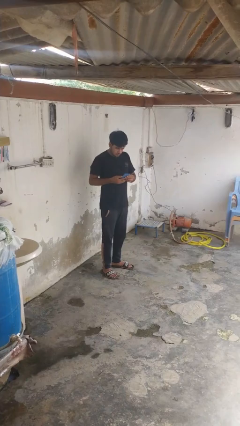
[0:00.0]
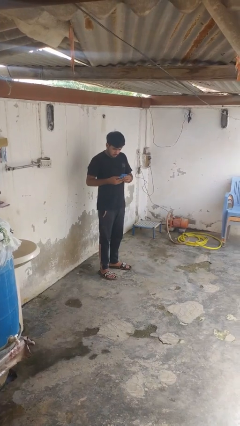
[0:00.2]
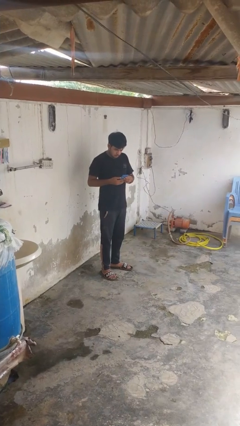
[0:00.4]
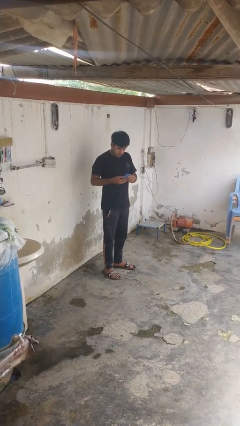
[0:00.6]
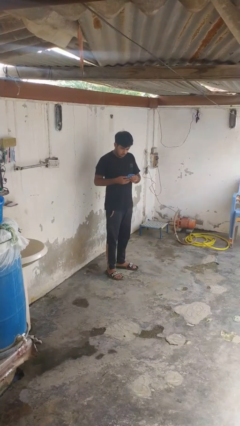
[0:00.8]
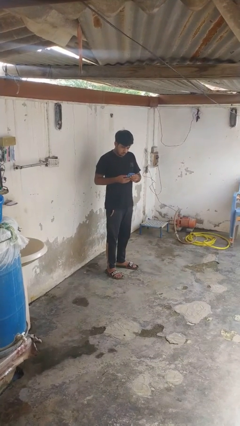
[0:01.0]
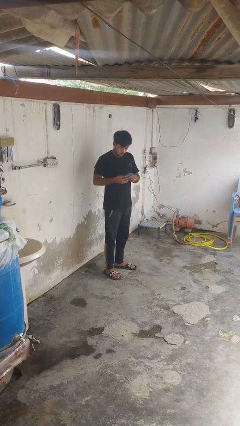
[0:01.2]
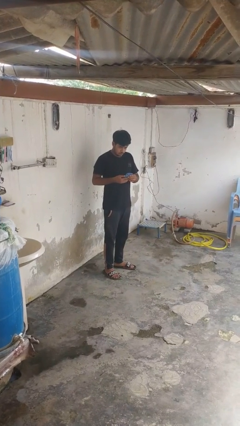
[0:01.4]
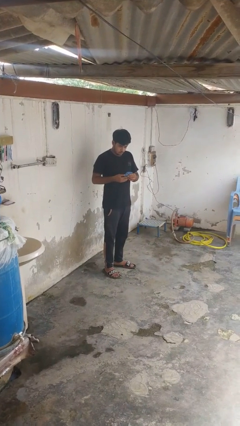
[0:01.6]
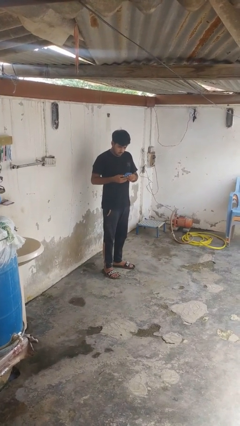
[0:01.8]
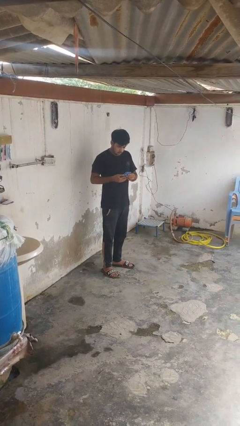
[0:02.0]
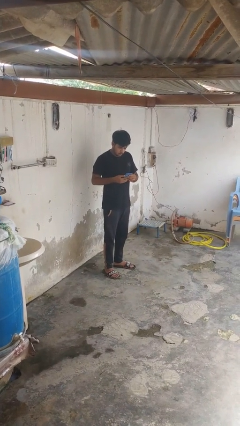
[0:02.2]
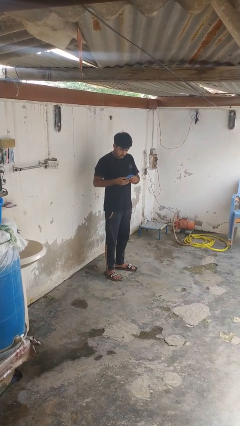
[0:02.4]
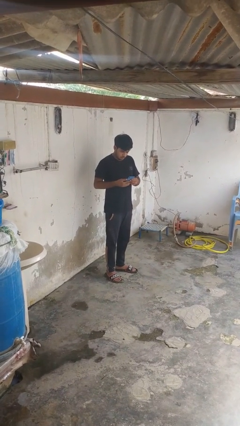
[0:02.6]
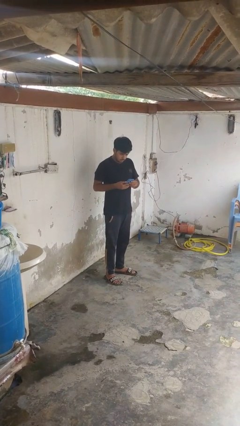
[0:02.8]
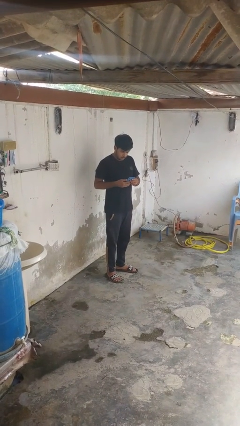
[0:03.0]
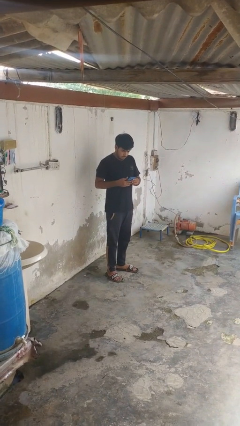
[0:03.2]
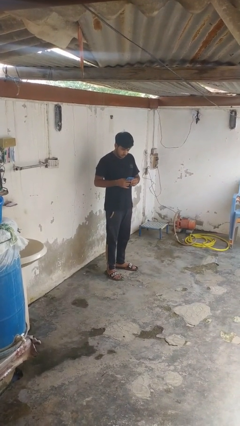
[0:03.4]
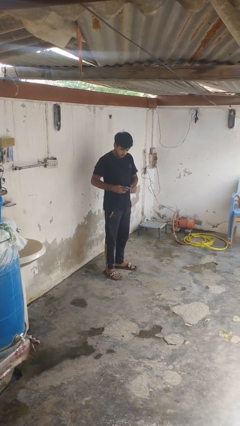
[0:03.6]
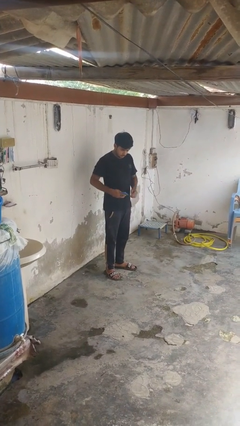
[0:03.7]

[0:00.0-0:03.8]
person takes phone from pocket

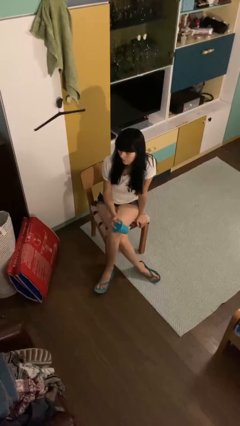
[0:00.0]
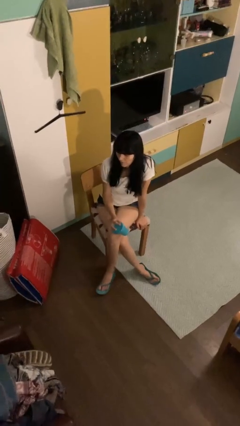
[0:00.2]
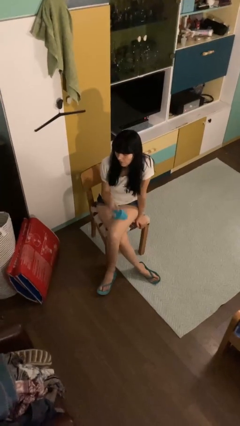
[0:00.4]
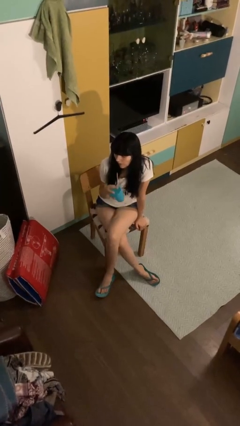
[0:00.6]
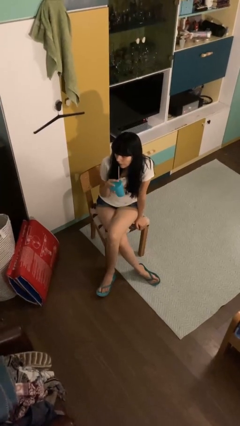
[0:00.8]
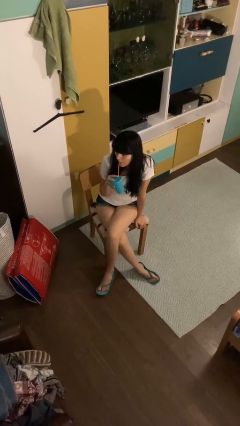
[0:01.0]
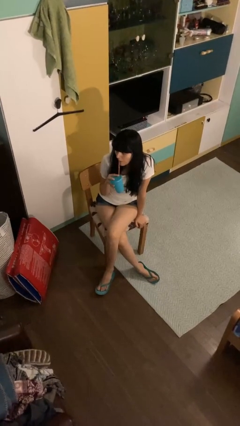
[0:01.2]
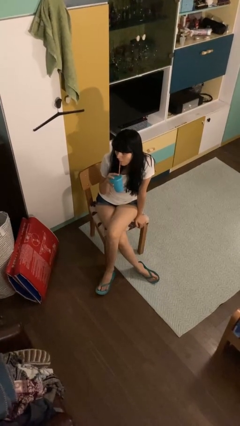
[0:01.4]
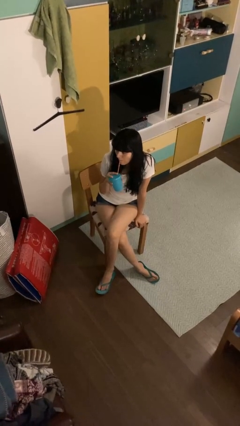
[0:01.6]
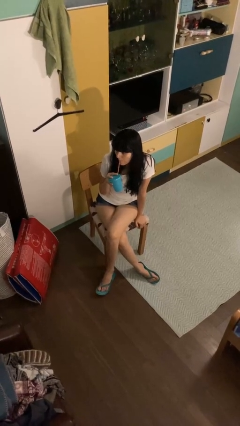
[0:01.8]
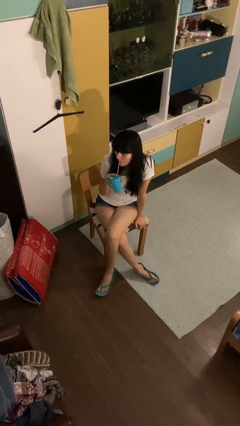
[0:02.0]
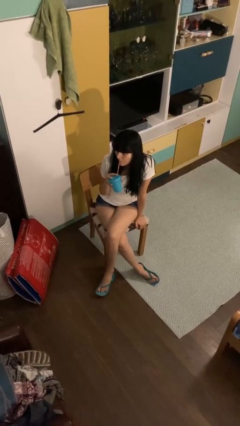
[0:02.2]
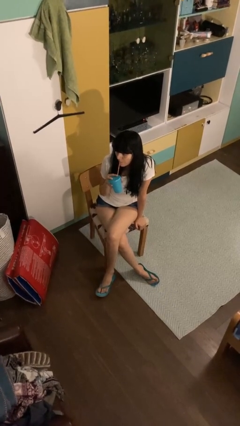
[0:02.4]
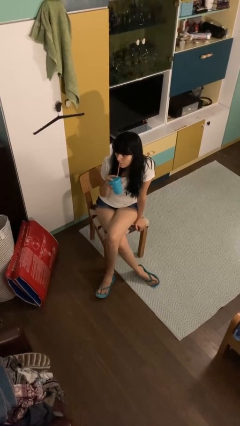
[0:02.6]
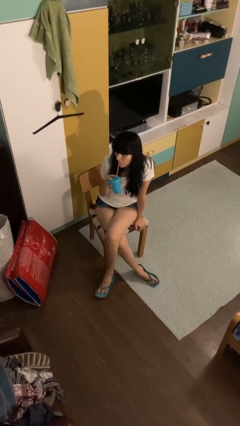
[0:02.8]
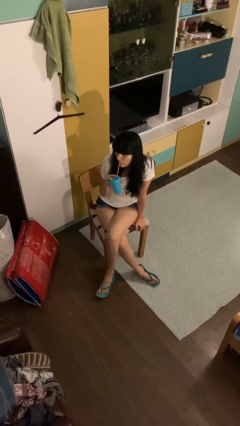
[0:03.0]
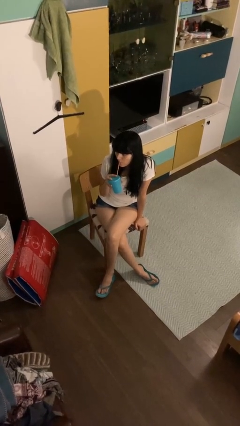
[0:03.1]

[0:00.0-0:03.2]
person drinks from straw

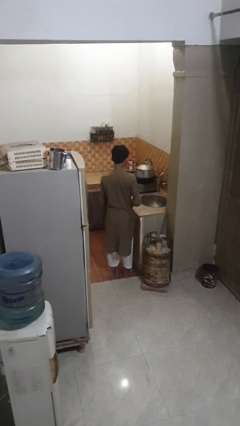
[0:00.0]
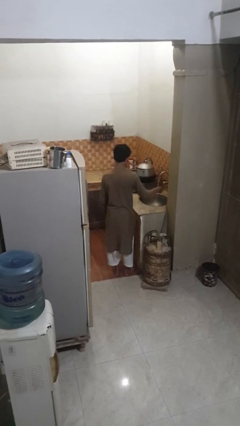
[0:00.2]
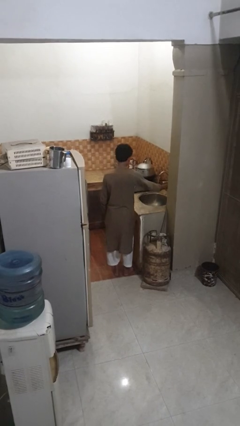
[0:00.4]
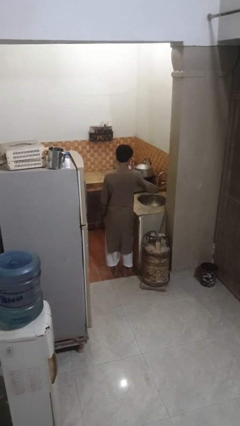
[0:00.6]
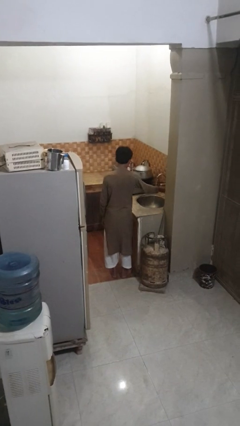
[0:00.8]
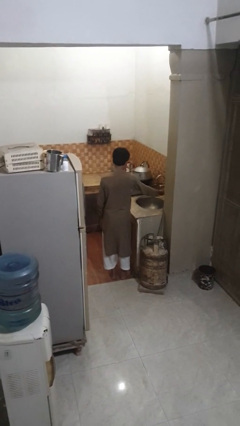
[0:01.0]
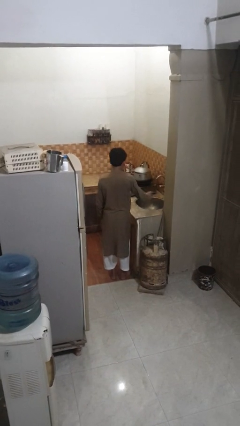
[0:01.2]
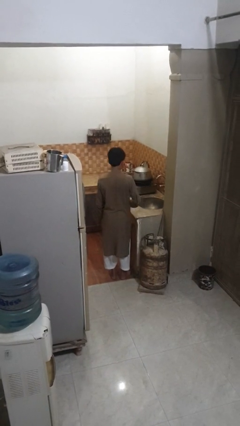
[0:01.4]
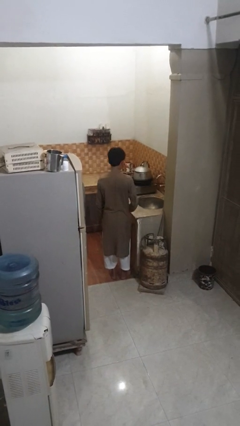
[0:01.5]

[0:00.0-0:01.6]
person turns off faucet

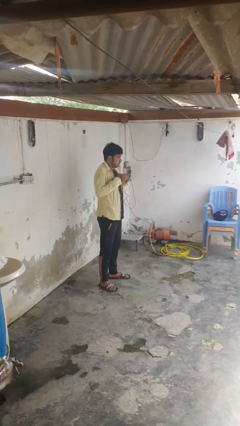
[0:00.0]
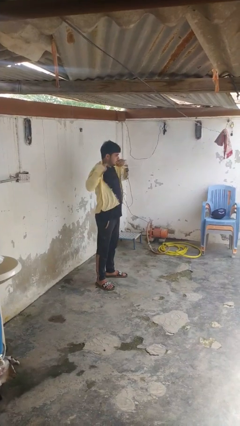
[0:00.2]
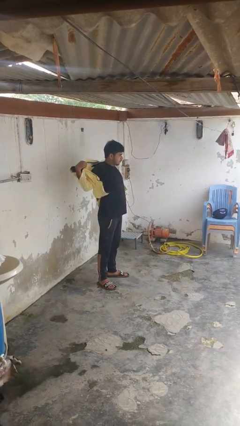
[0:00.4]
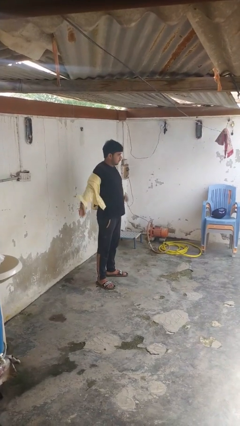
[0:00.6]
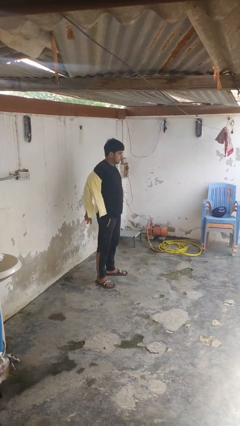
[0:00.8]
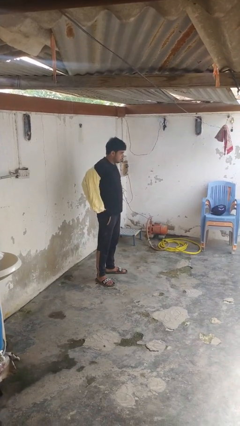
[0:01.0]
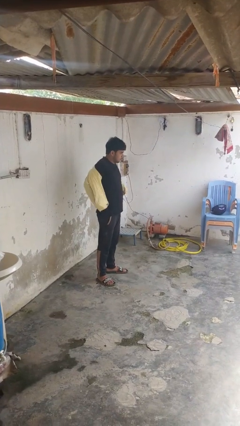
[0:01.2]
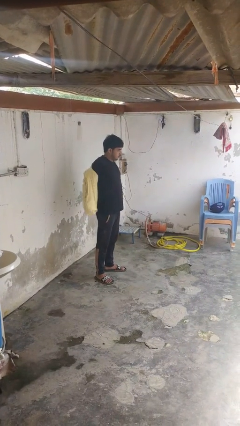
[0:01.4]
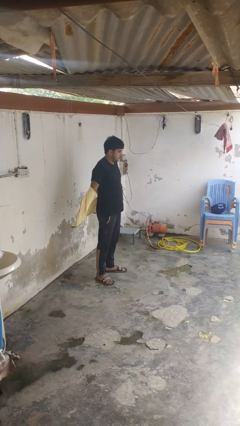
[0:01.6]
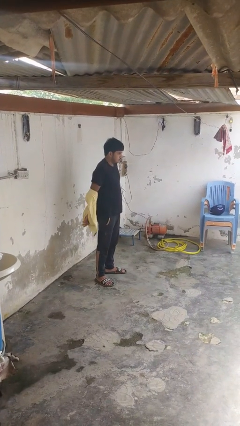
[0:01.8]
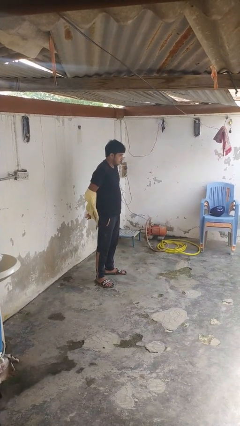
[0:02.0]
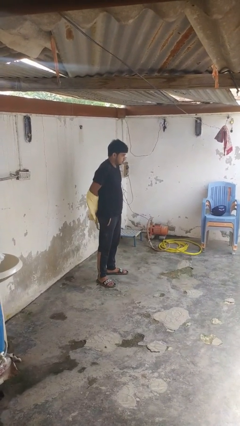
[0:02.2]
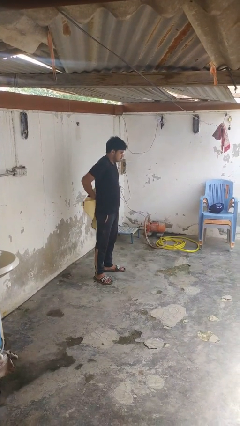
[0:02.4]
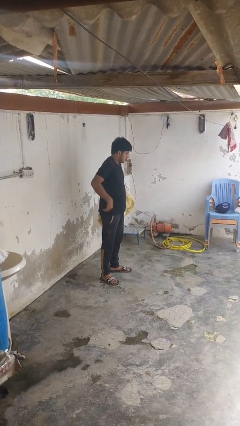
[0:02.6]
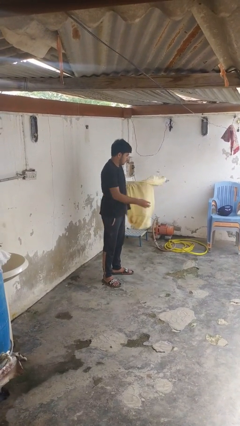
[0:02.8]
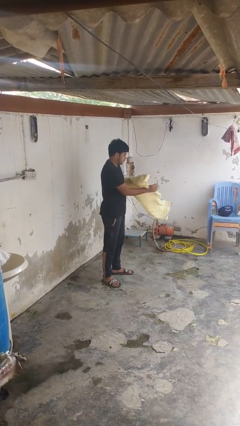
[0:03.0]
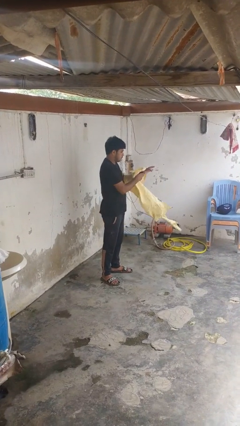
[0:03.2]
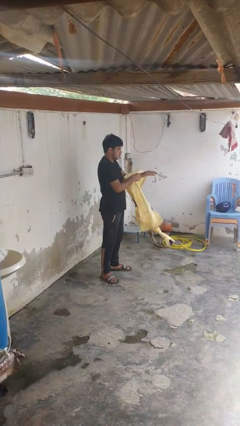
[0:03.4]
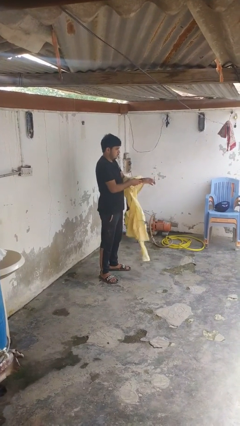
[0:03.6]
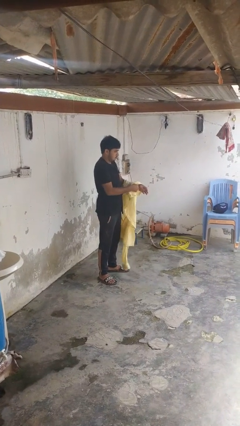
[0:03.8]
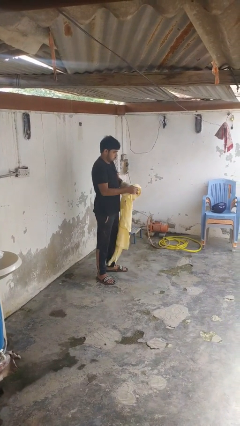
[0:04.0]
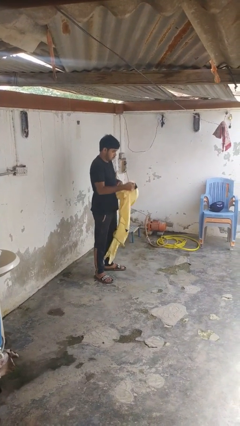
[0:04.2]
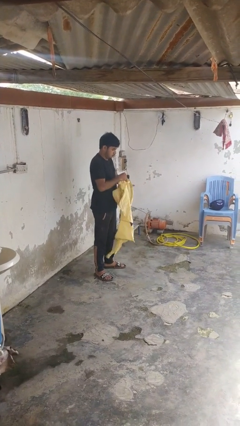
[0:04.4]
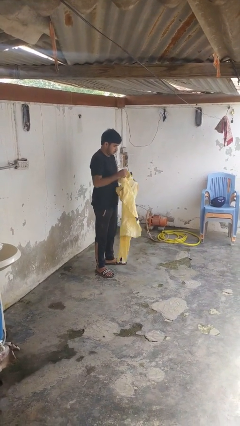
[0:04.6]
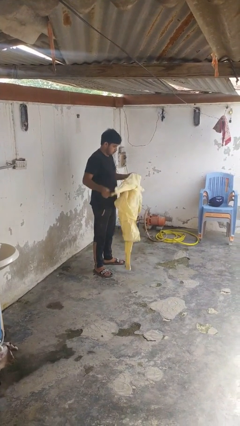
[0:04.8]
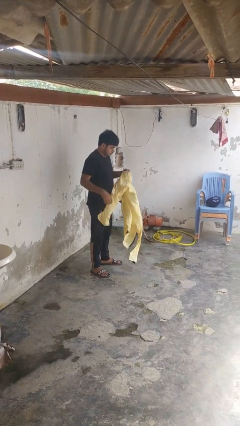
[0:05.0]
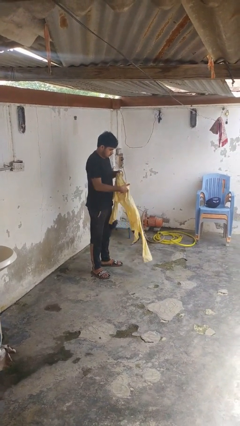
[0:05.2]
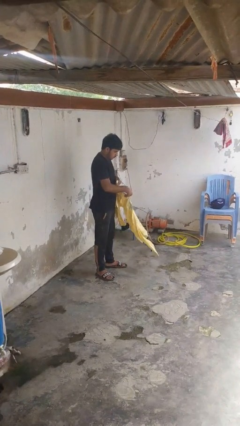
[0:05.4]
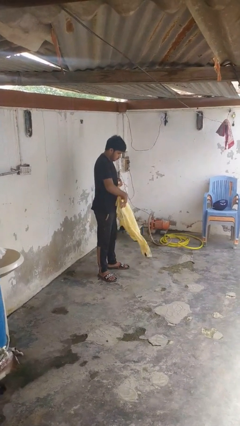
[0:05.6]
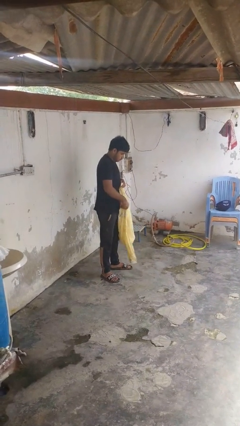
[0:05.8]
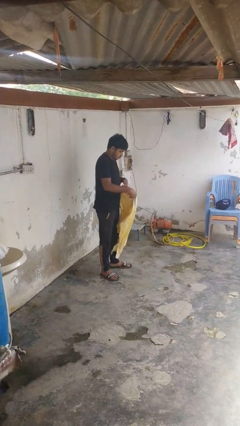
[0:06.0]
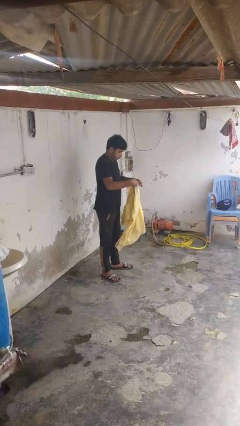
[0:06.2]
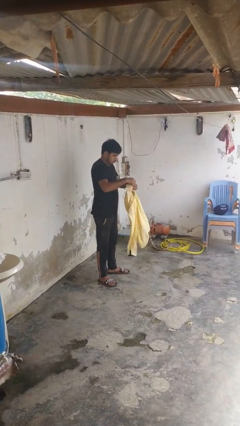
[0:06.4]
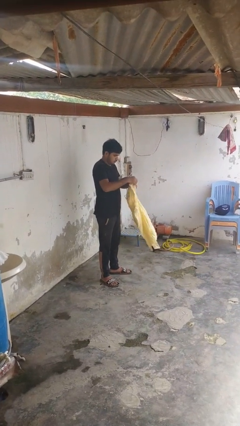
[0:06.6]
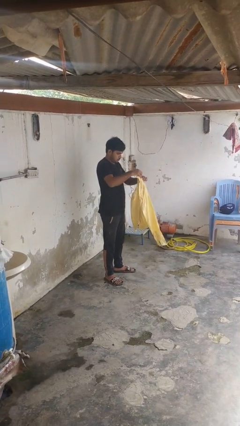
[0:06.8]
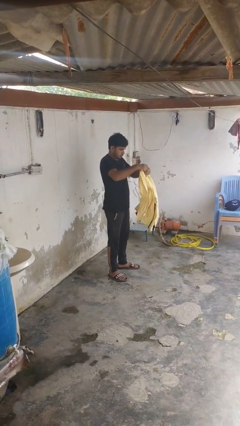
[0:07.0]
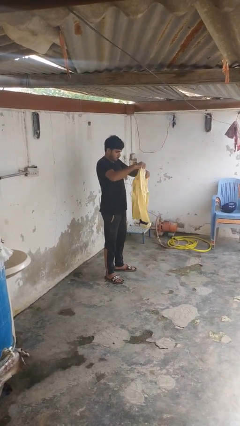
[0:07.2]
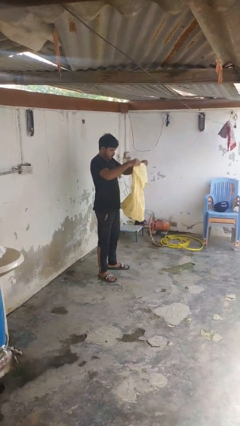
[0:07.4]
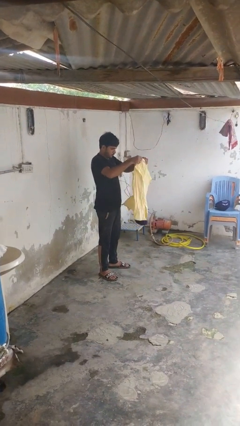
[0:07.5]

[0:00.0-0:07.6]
person takes off shirt

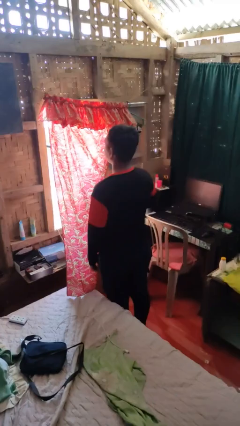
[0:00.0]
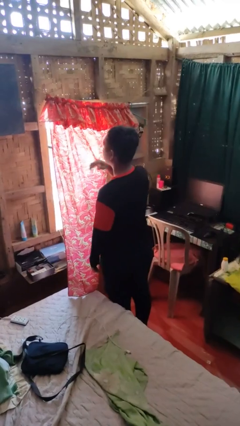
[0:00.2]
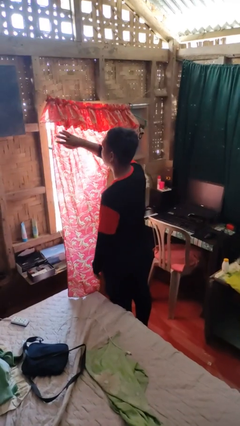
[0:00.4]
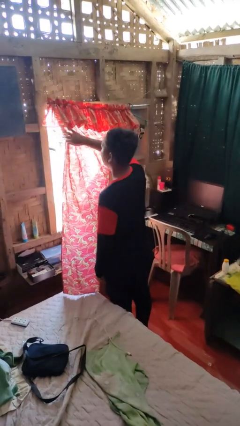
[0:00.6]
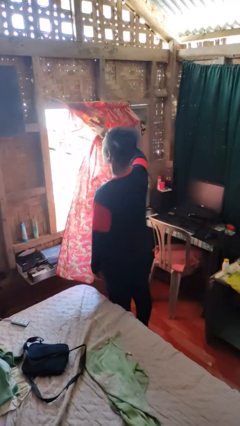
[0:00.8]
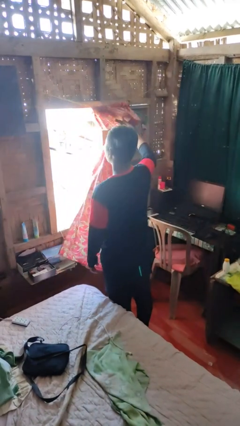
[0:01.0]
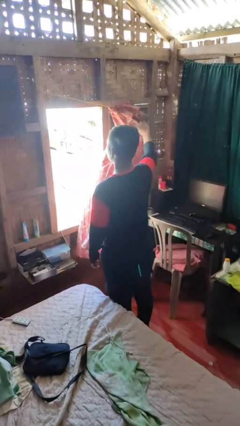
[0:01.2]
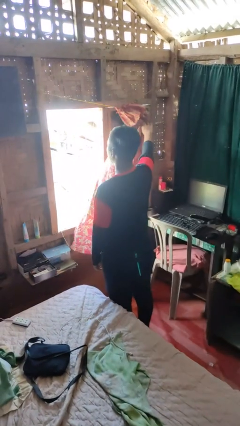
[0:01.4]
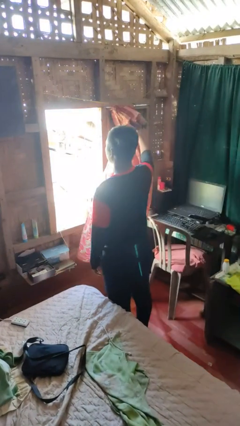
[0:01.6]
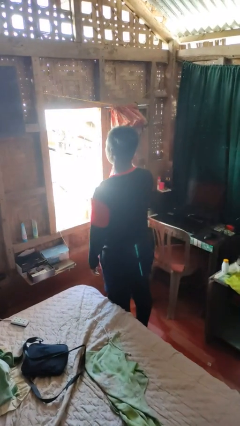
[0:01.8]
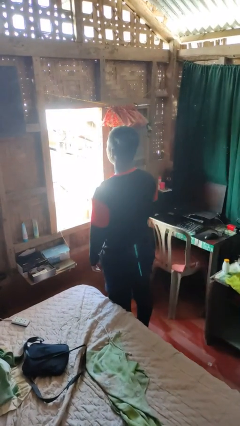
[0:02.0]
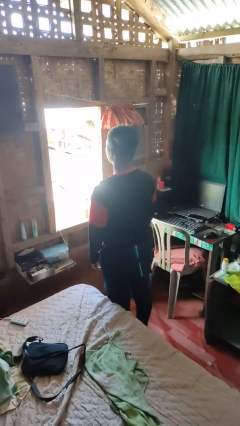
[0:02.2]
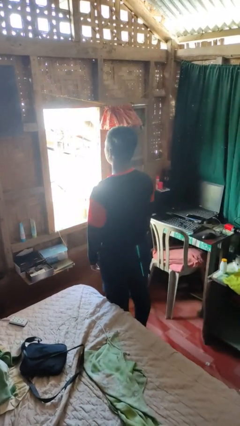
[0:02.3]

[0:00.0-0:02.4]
person opens curtains
